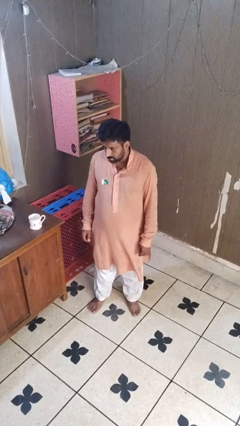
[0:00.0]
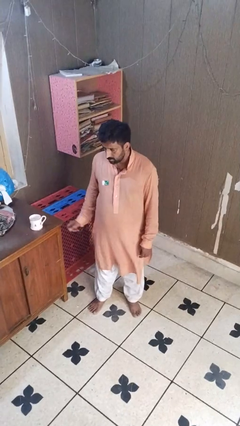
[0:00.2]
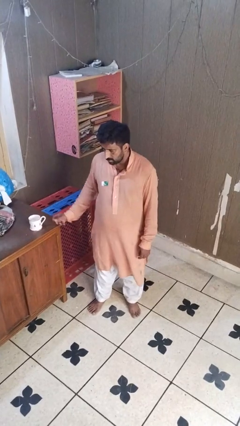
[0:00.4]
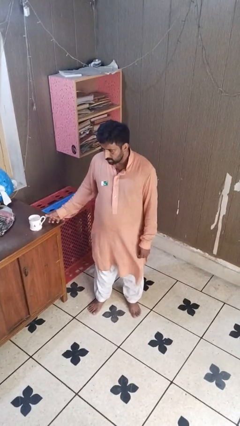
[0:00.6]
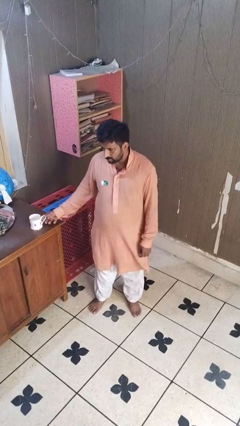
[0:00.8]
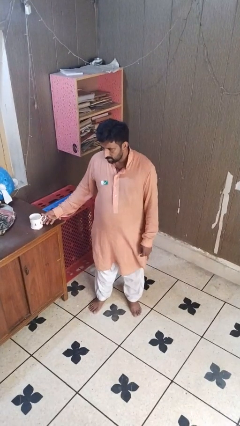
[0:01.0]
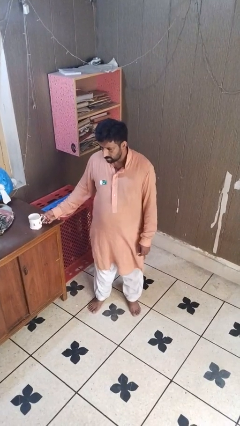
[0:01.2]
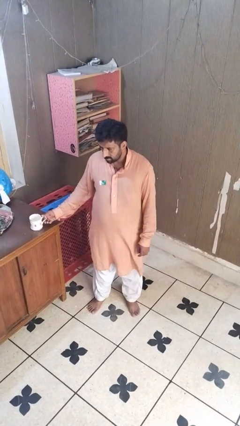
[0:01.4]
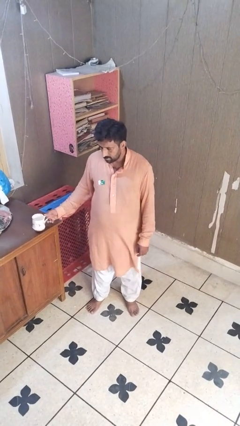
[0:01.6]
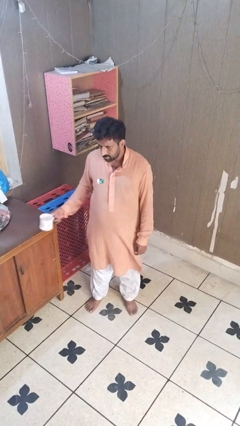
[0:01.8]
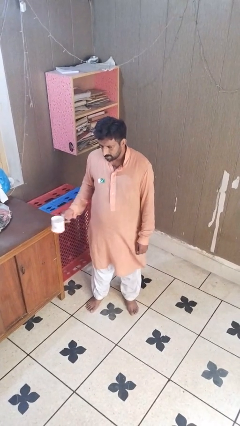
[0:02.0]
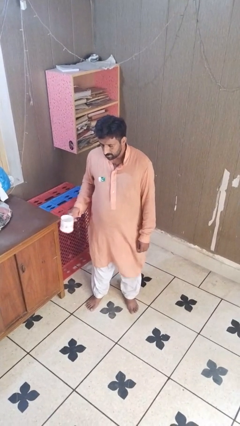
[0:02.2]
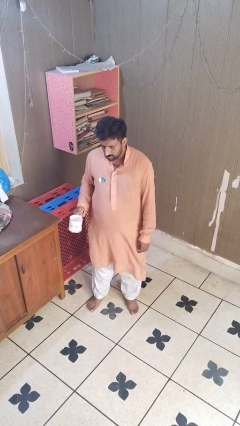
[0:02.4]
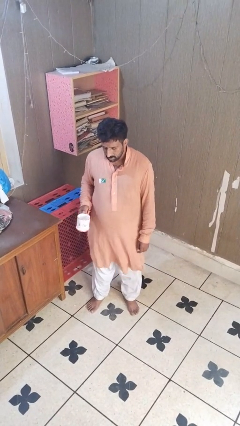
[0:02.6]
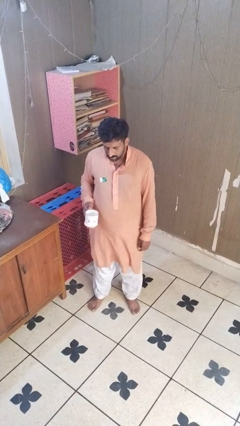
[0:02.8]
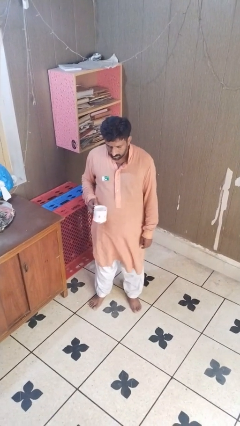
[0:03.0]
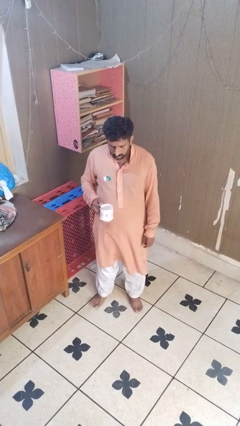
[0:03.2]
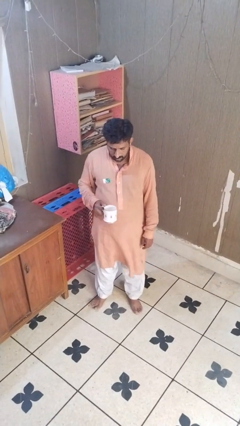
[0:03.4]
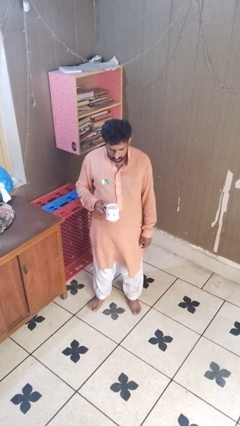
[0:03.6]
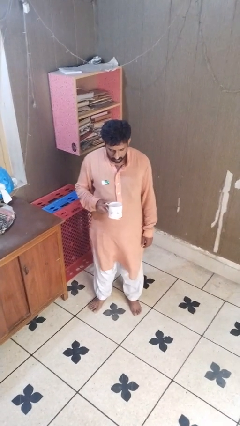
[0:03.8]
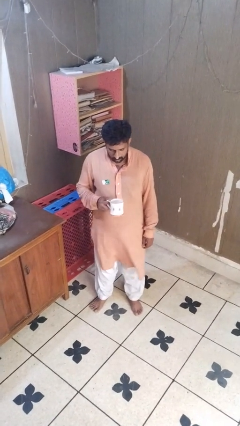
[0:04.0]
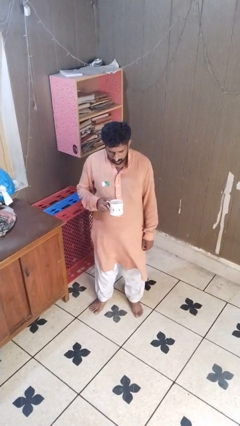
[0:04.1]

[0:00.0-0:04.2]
person picks up object from table

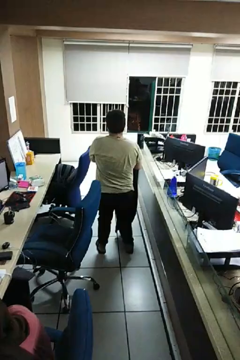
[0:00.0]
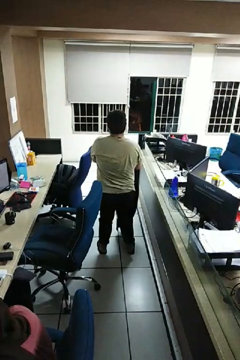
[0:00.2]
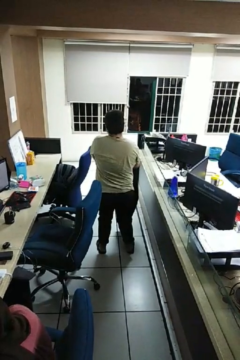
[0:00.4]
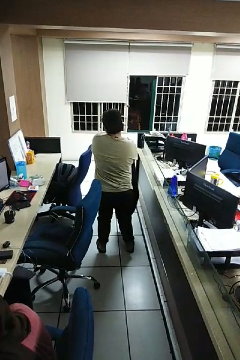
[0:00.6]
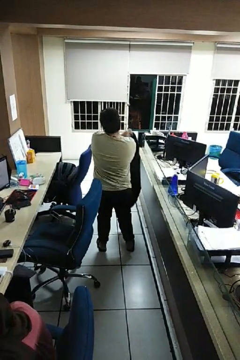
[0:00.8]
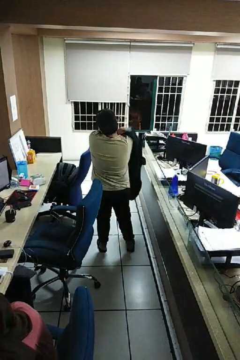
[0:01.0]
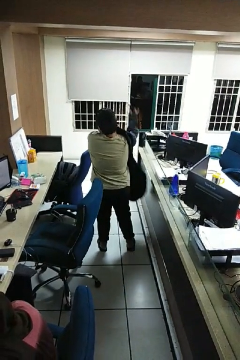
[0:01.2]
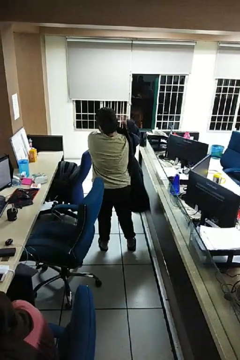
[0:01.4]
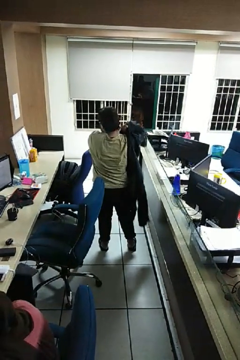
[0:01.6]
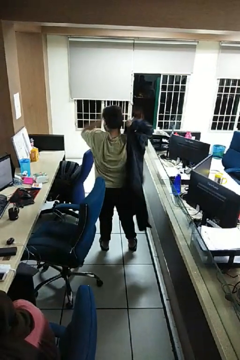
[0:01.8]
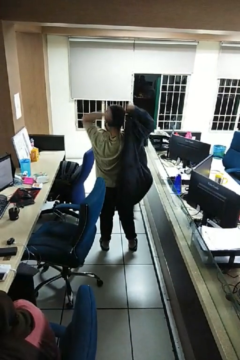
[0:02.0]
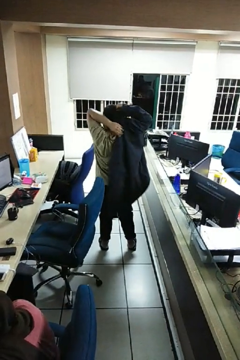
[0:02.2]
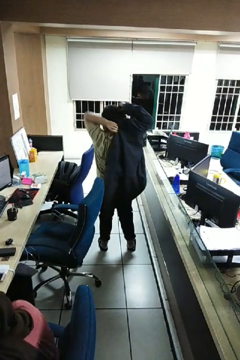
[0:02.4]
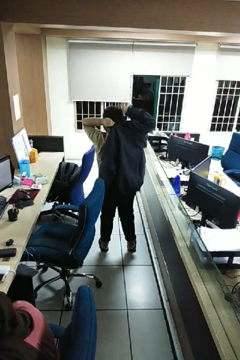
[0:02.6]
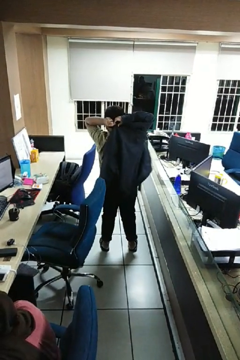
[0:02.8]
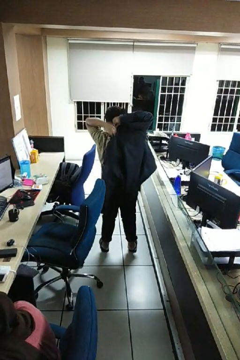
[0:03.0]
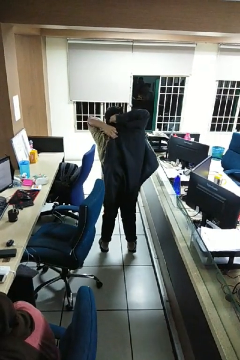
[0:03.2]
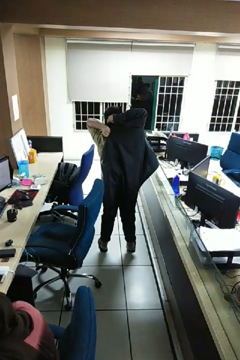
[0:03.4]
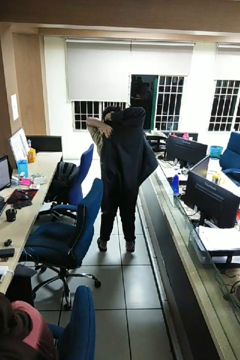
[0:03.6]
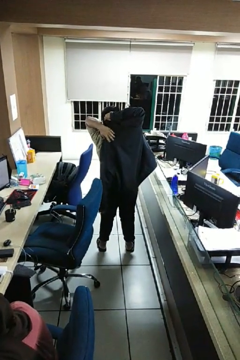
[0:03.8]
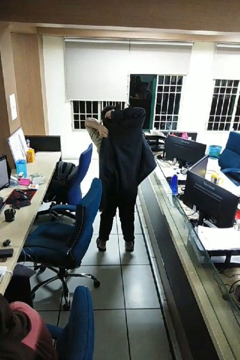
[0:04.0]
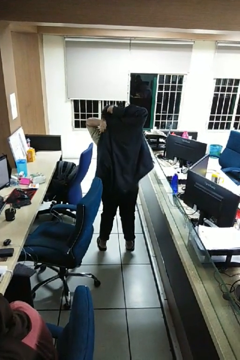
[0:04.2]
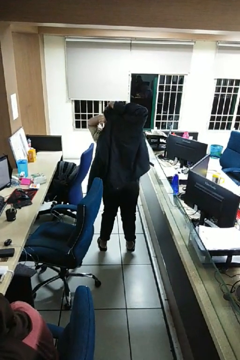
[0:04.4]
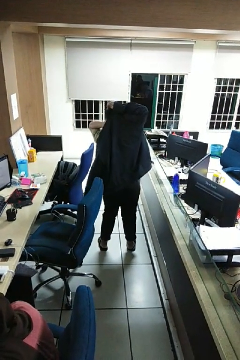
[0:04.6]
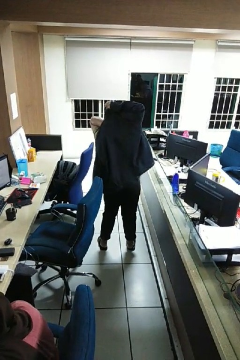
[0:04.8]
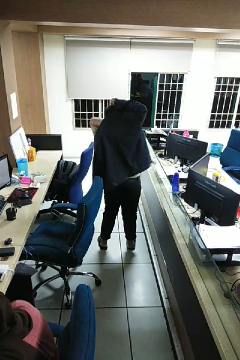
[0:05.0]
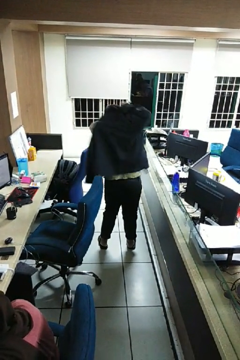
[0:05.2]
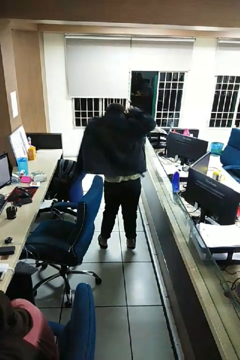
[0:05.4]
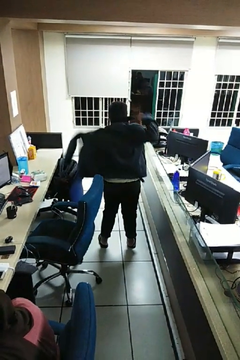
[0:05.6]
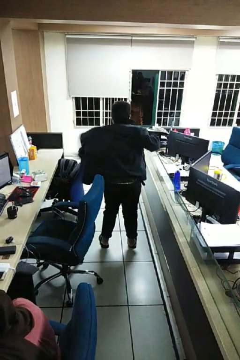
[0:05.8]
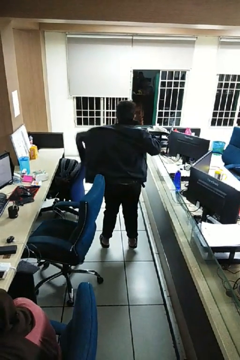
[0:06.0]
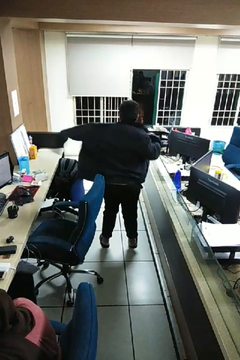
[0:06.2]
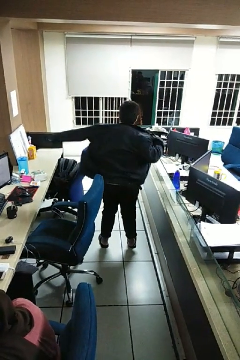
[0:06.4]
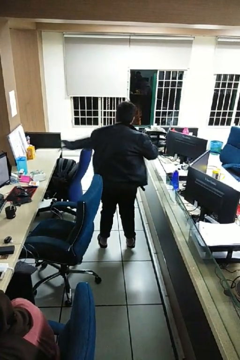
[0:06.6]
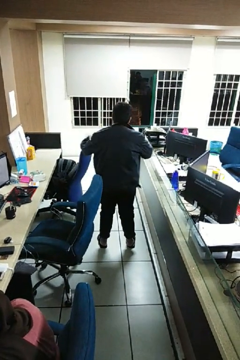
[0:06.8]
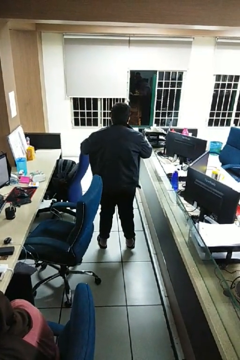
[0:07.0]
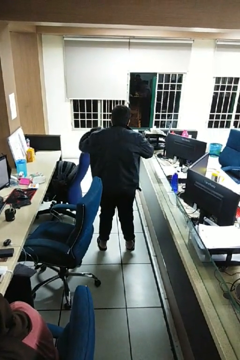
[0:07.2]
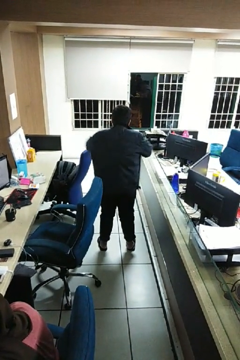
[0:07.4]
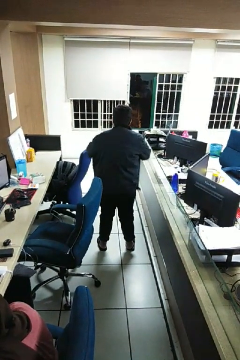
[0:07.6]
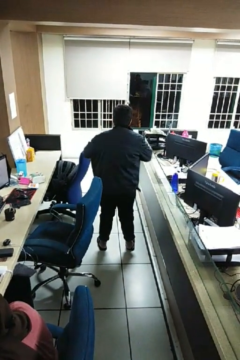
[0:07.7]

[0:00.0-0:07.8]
person puts on shirt

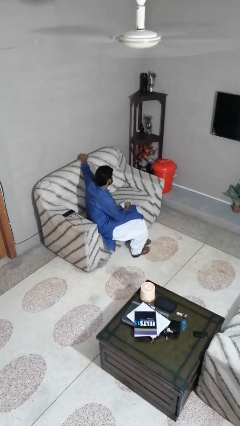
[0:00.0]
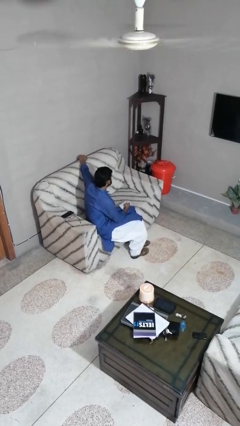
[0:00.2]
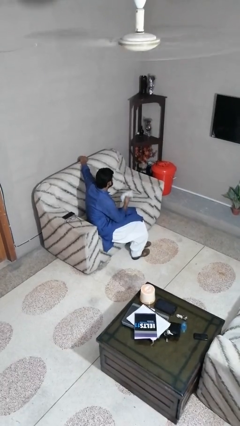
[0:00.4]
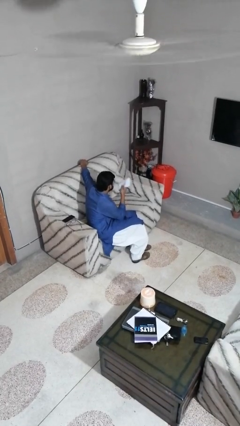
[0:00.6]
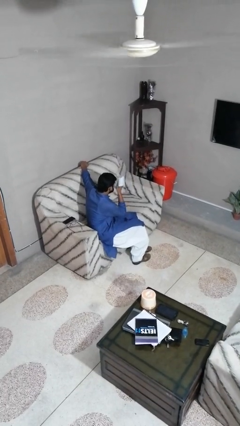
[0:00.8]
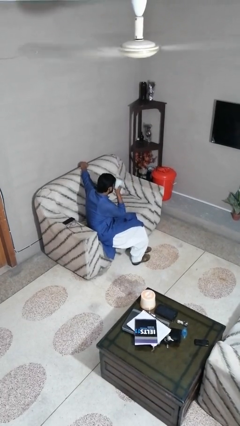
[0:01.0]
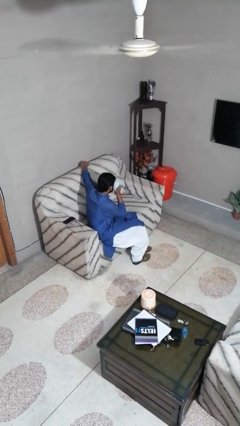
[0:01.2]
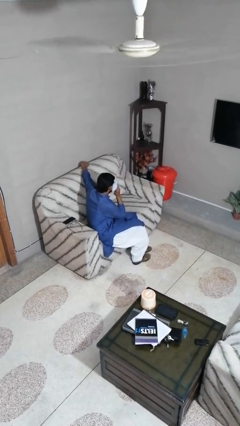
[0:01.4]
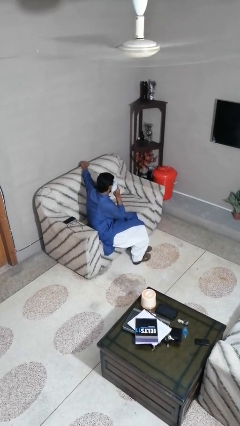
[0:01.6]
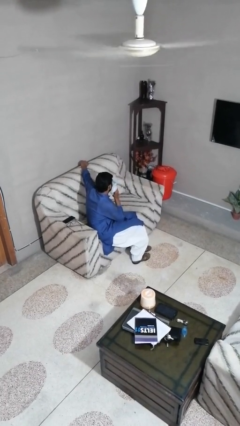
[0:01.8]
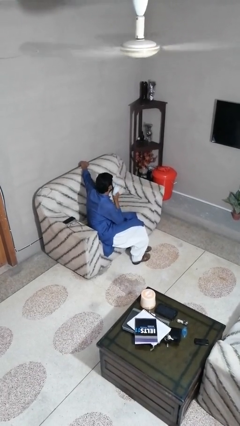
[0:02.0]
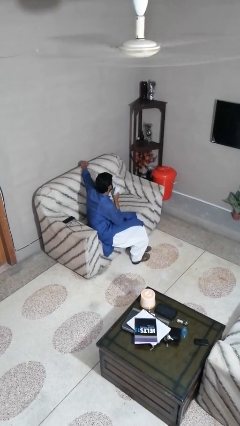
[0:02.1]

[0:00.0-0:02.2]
person wipes mouth with napkin

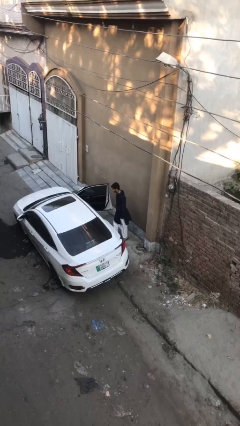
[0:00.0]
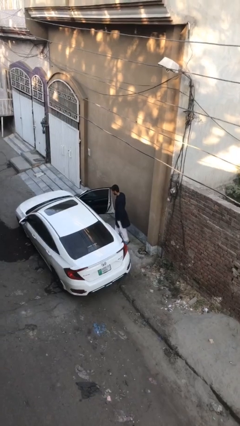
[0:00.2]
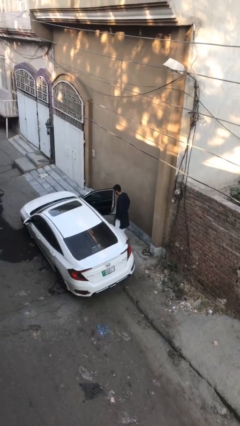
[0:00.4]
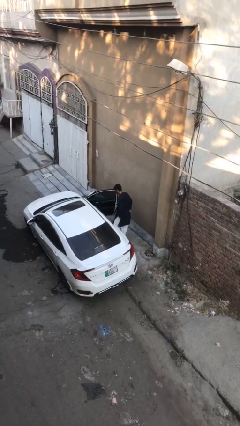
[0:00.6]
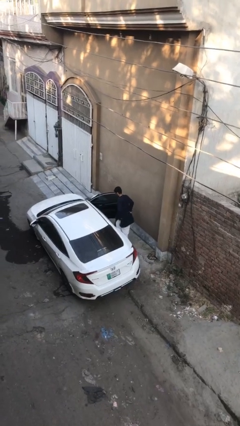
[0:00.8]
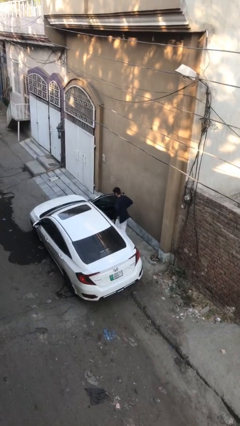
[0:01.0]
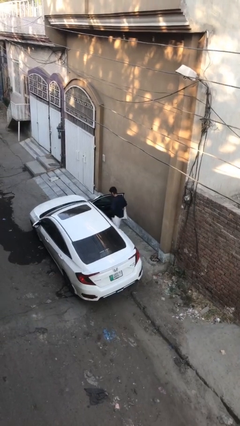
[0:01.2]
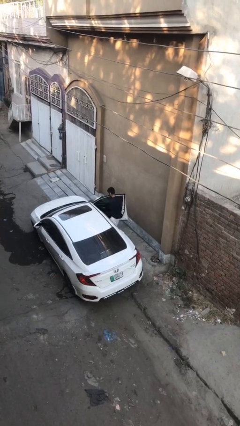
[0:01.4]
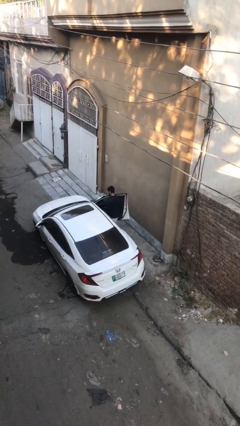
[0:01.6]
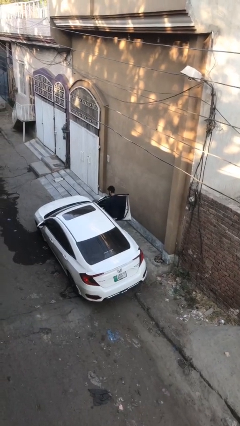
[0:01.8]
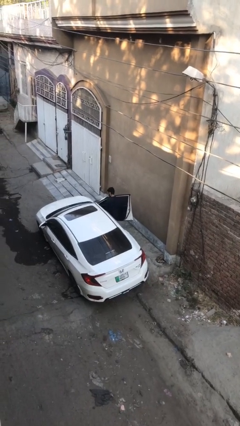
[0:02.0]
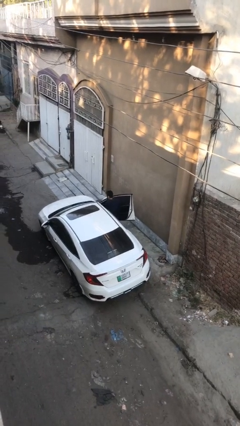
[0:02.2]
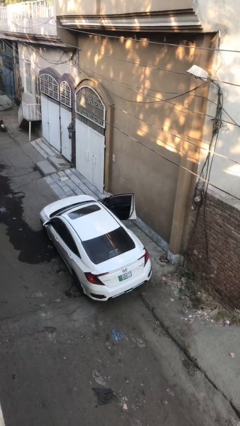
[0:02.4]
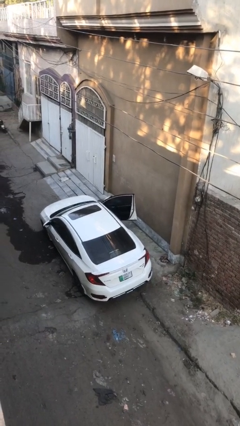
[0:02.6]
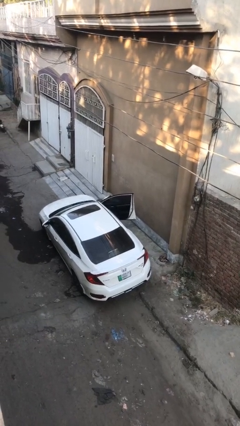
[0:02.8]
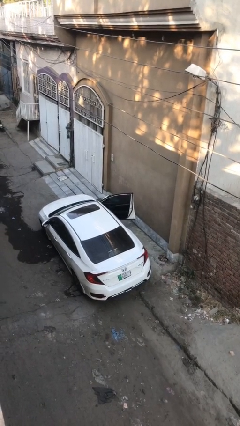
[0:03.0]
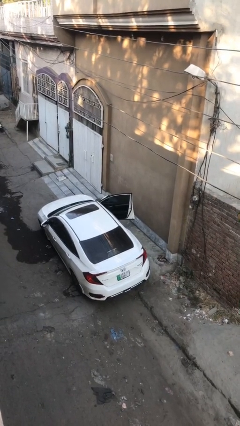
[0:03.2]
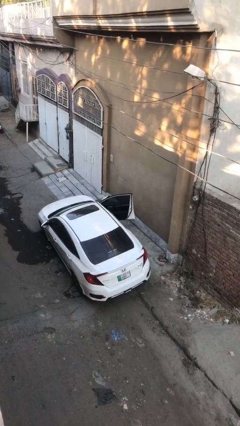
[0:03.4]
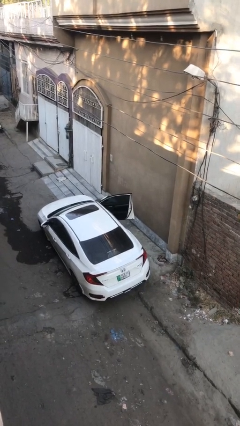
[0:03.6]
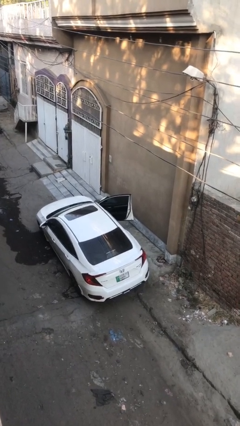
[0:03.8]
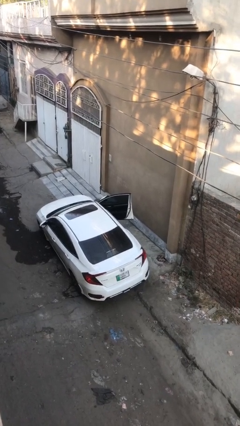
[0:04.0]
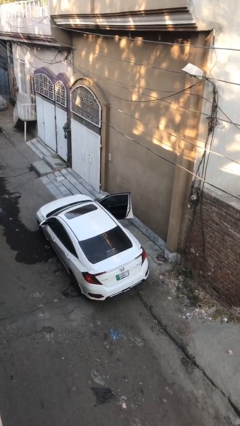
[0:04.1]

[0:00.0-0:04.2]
person enters car

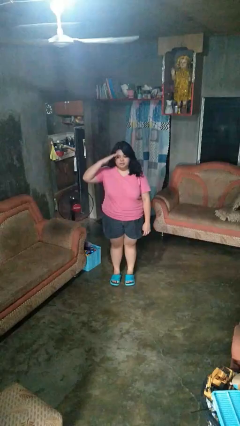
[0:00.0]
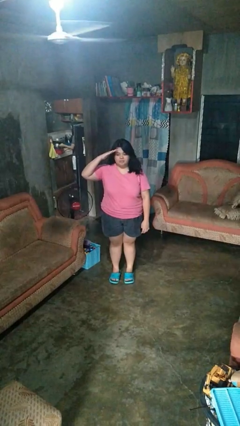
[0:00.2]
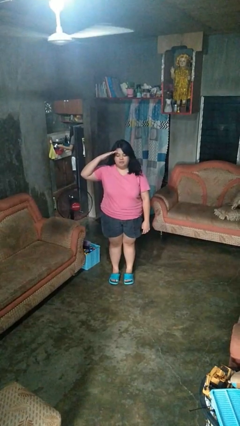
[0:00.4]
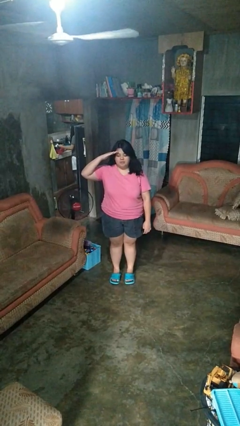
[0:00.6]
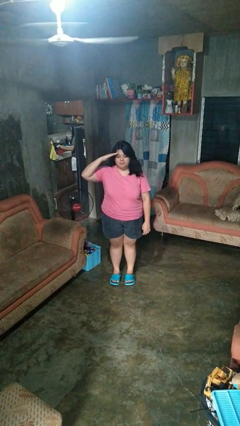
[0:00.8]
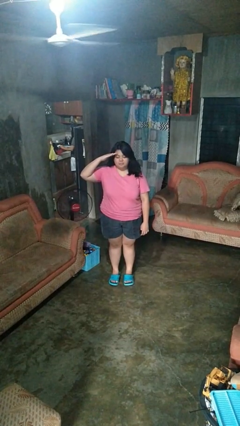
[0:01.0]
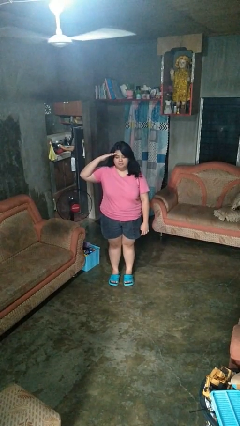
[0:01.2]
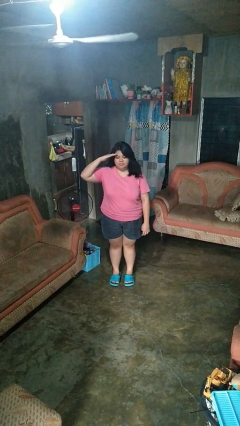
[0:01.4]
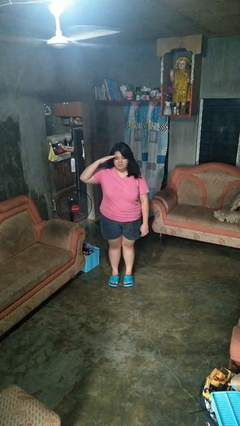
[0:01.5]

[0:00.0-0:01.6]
person salutes
